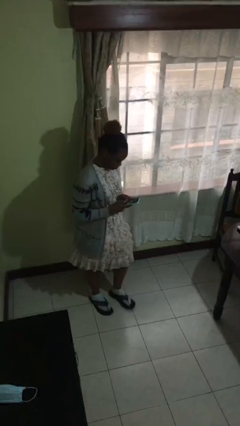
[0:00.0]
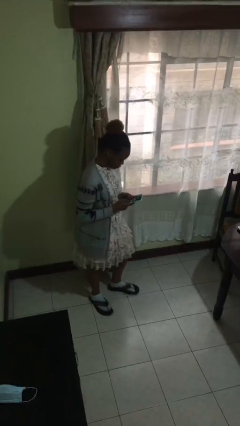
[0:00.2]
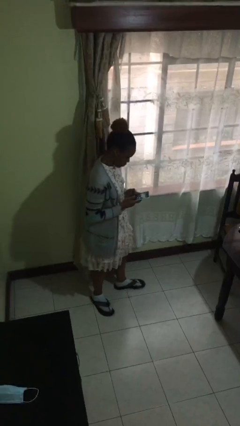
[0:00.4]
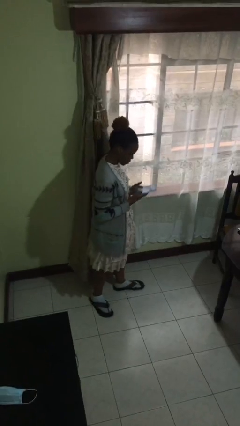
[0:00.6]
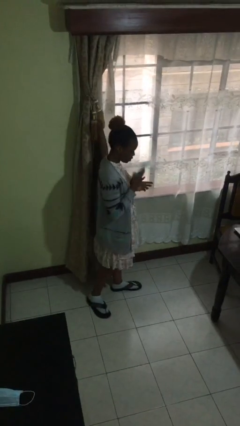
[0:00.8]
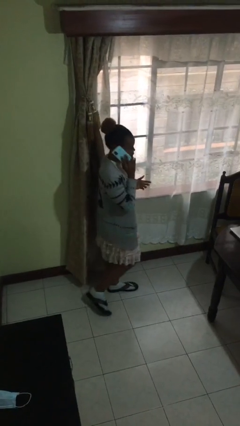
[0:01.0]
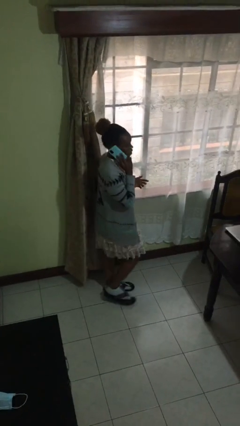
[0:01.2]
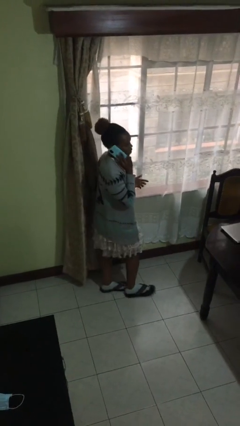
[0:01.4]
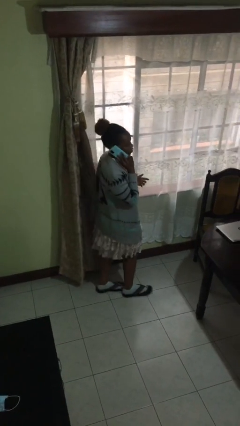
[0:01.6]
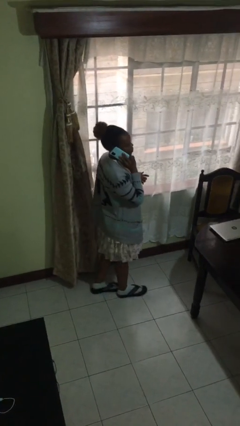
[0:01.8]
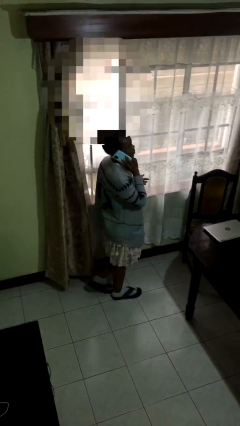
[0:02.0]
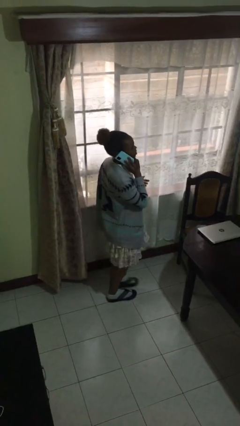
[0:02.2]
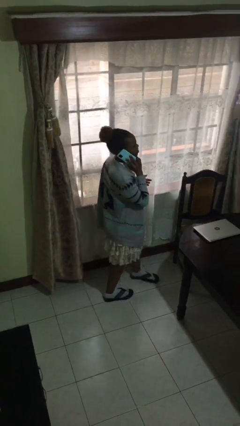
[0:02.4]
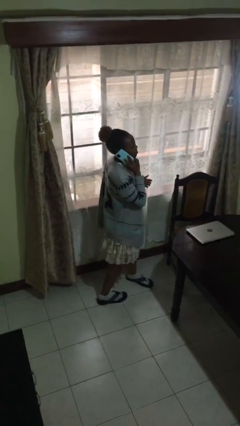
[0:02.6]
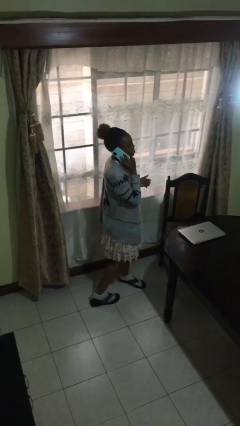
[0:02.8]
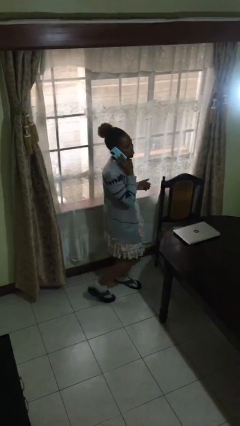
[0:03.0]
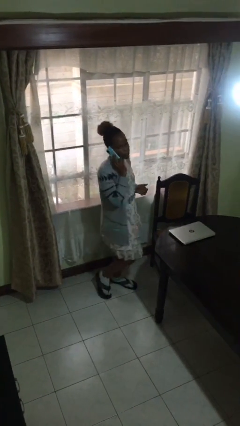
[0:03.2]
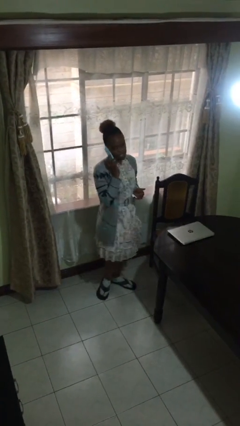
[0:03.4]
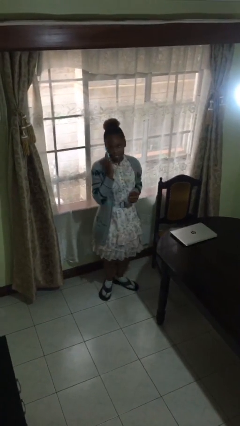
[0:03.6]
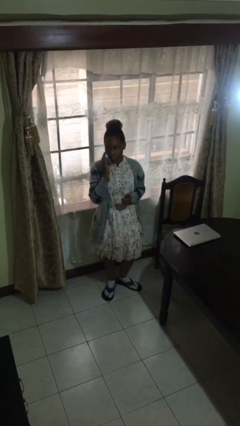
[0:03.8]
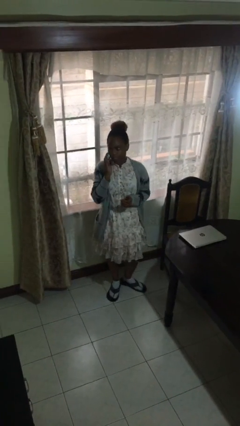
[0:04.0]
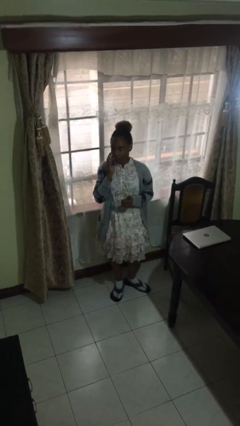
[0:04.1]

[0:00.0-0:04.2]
person talks on phone

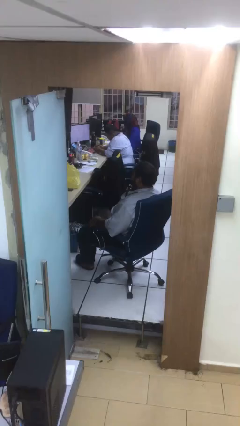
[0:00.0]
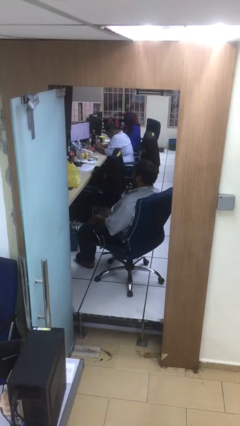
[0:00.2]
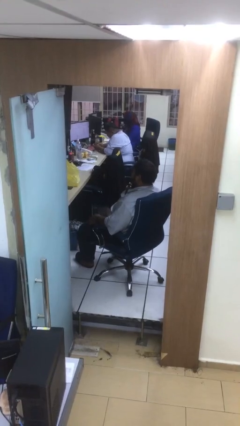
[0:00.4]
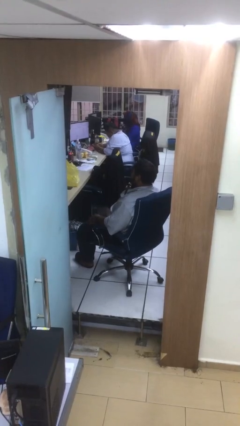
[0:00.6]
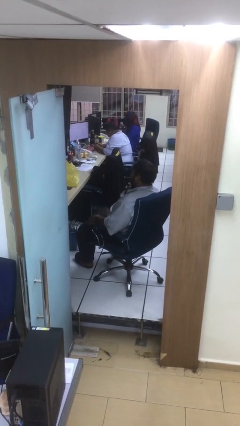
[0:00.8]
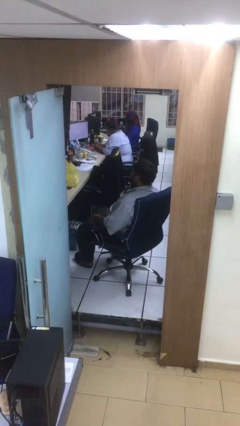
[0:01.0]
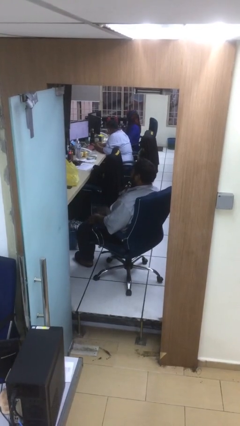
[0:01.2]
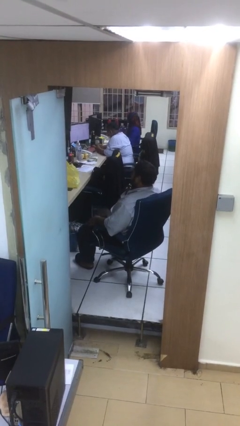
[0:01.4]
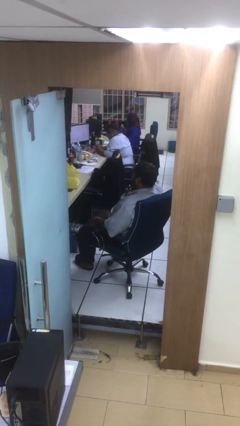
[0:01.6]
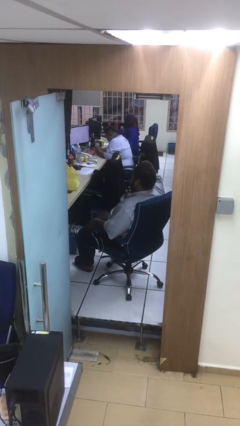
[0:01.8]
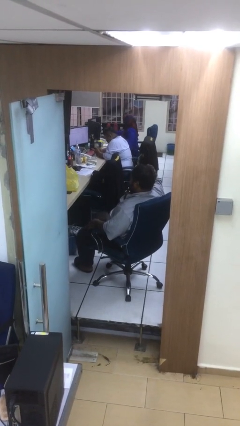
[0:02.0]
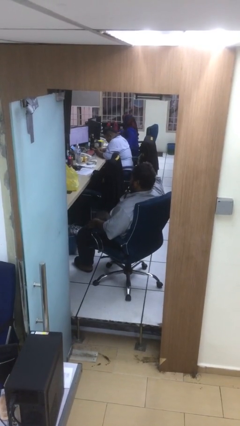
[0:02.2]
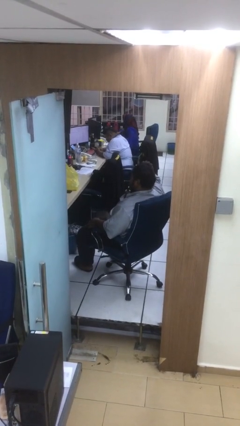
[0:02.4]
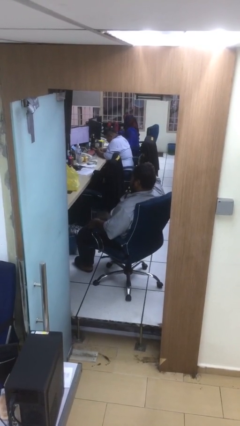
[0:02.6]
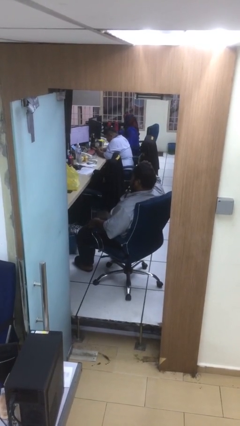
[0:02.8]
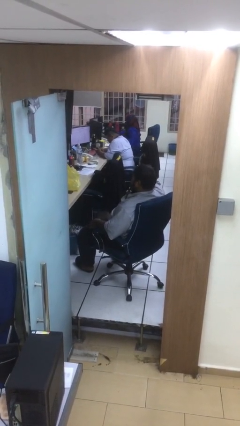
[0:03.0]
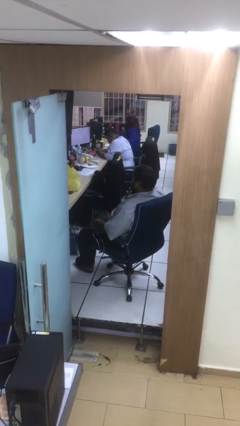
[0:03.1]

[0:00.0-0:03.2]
person scratches face

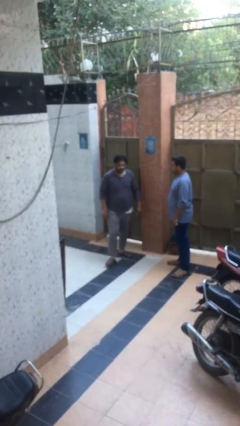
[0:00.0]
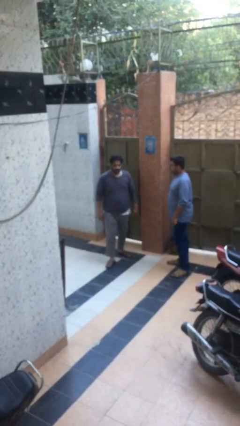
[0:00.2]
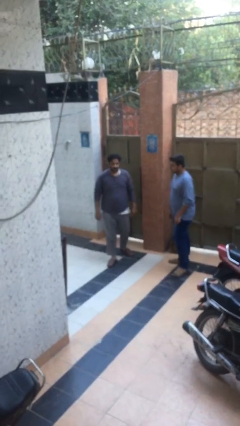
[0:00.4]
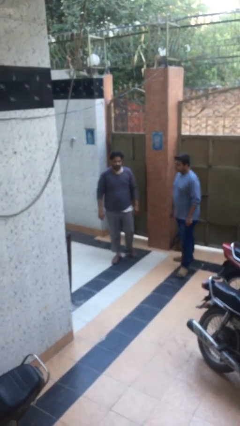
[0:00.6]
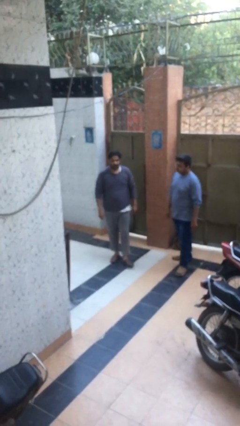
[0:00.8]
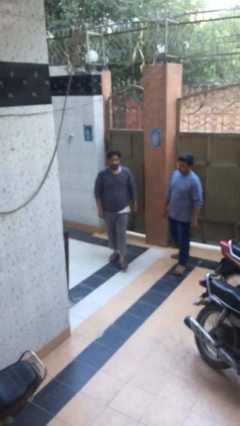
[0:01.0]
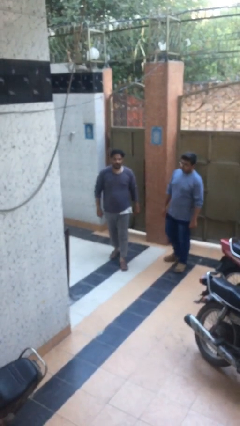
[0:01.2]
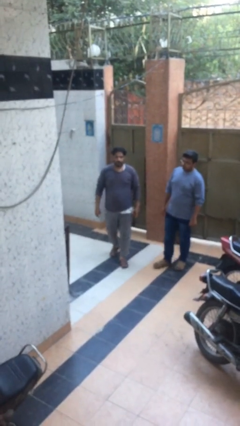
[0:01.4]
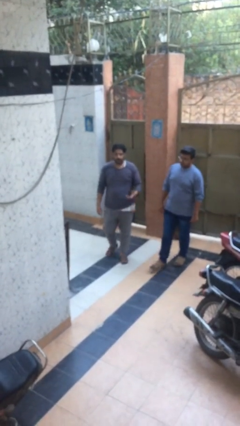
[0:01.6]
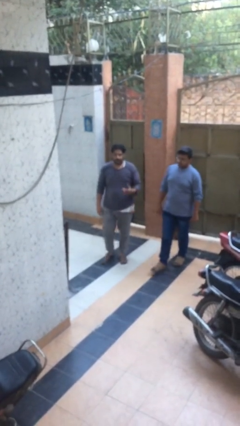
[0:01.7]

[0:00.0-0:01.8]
person talks to person

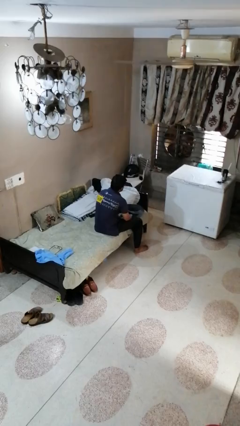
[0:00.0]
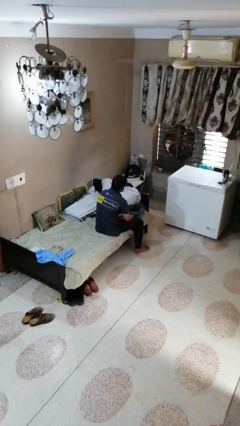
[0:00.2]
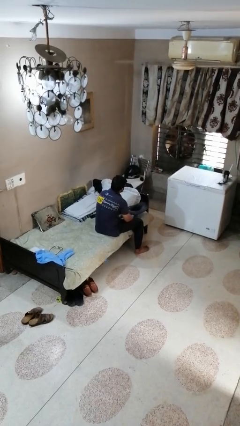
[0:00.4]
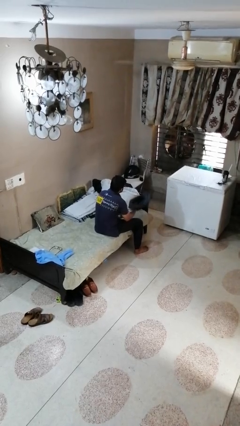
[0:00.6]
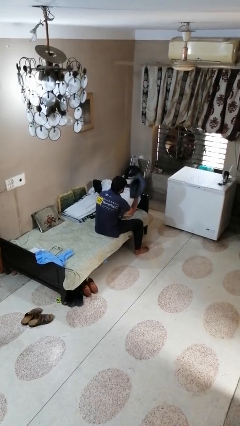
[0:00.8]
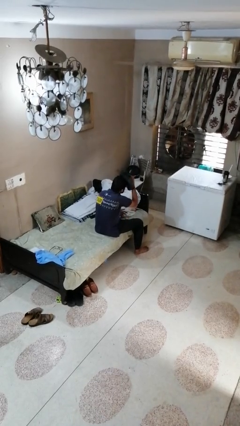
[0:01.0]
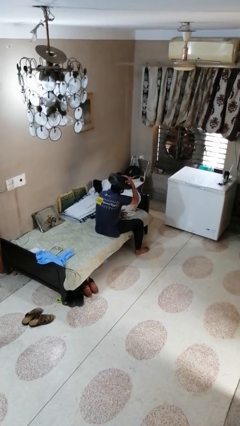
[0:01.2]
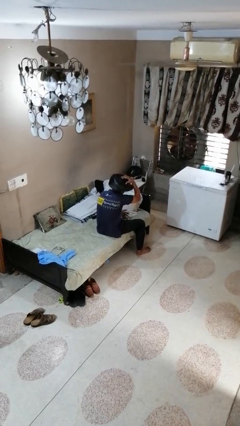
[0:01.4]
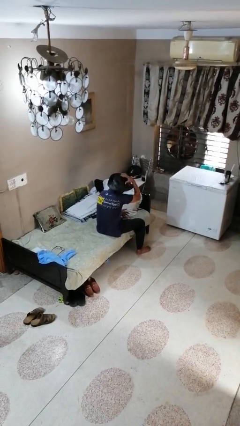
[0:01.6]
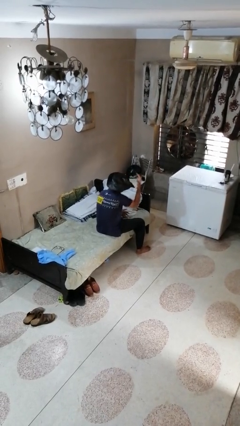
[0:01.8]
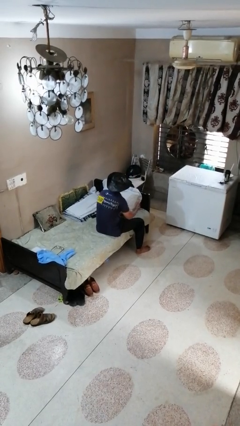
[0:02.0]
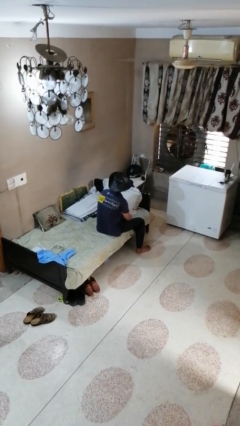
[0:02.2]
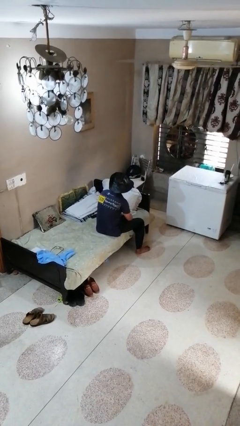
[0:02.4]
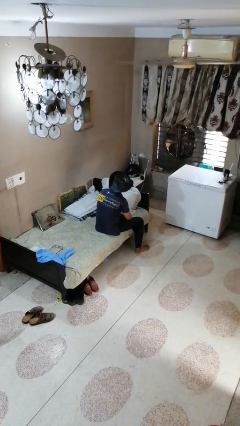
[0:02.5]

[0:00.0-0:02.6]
person puts on hat

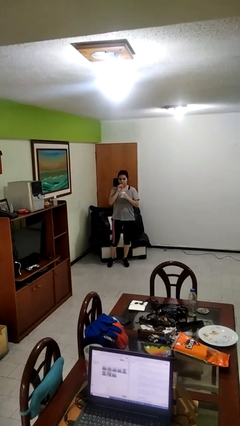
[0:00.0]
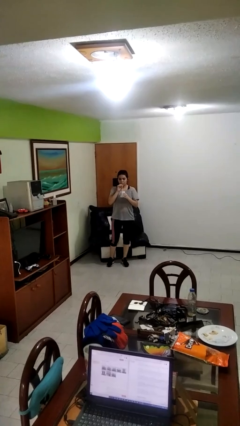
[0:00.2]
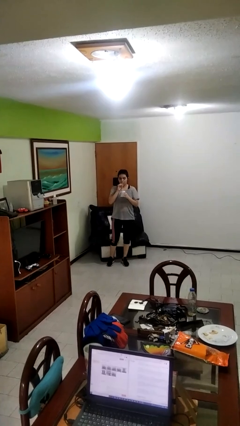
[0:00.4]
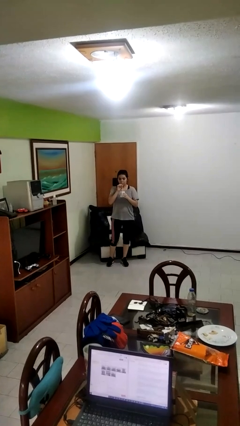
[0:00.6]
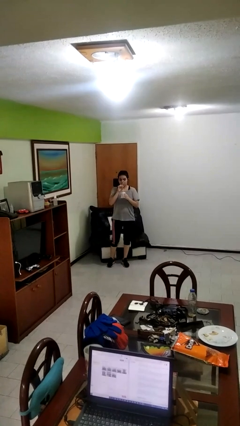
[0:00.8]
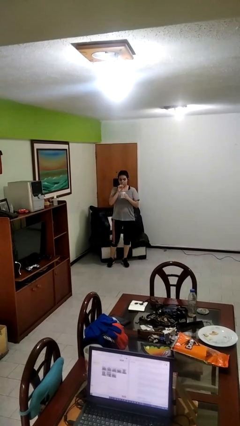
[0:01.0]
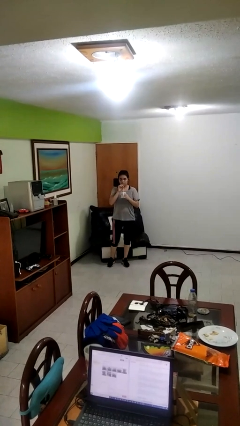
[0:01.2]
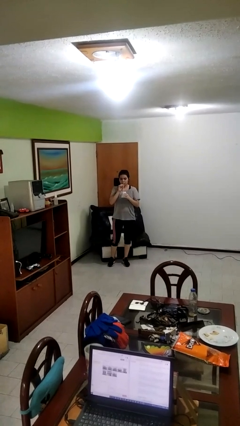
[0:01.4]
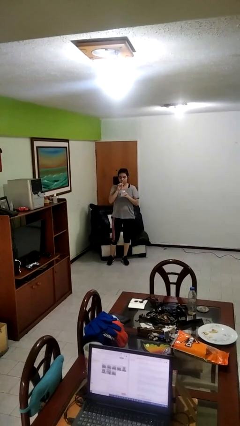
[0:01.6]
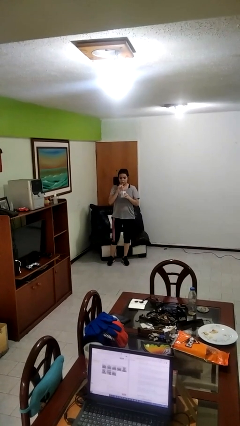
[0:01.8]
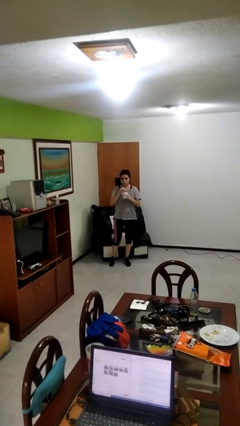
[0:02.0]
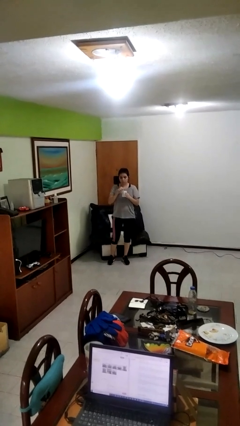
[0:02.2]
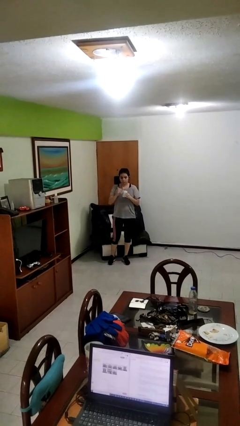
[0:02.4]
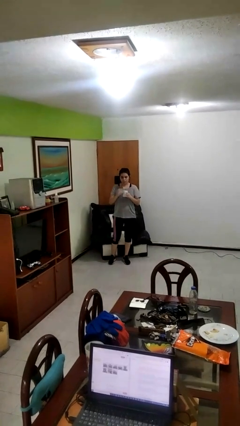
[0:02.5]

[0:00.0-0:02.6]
person drinks from straw

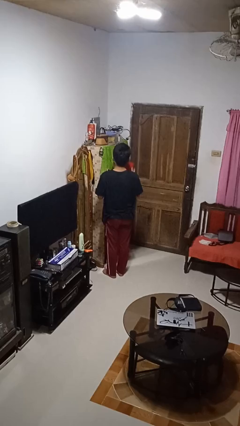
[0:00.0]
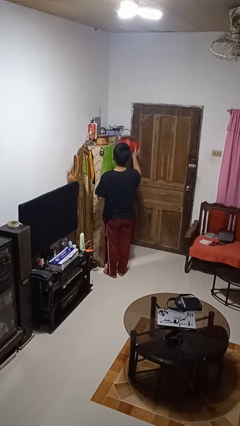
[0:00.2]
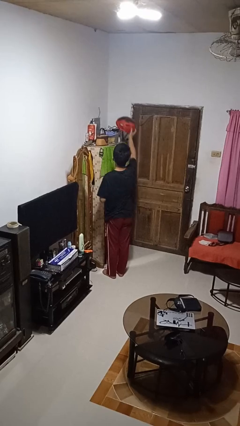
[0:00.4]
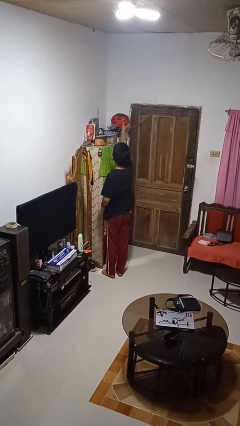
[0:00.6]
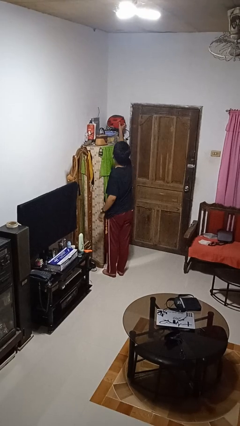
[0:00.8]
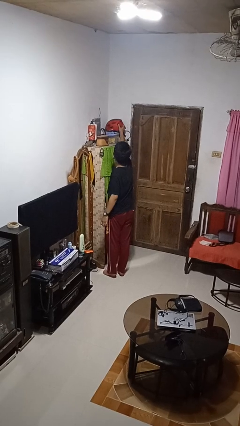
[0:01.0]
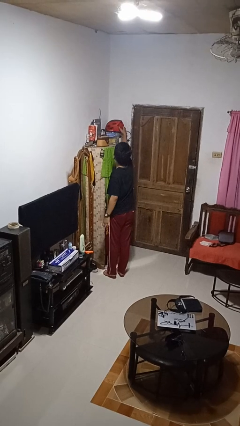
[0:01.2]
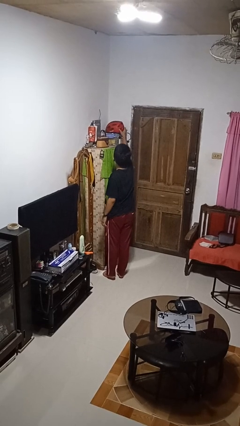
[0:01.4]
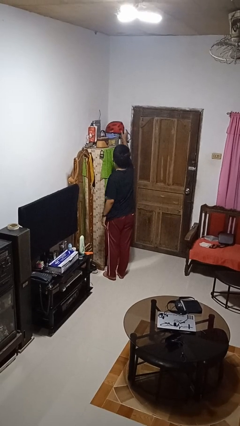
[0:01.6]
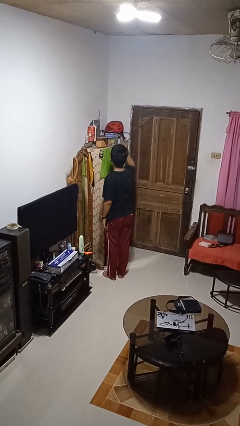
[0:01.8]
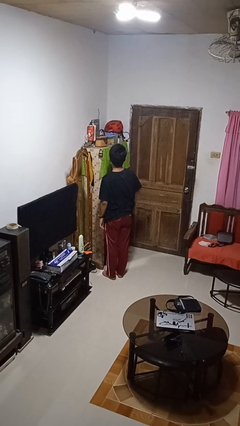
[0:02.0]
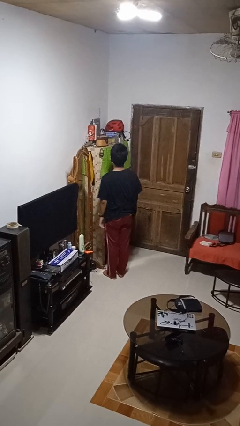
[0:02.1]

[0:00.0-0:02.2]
person puts down object on shelf

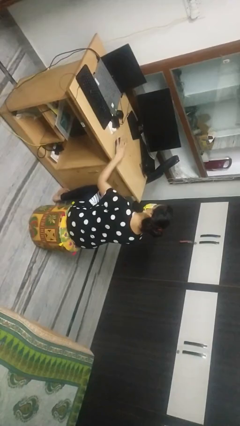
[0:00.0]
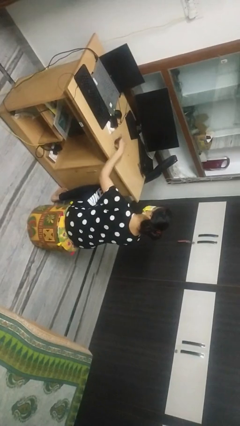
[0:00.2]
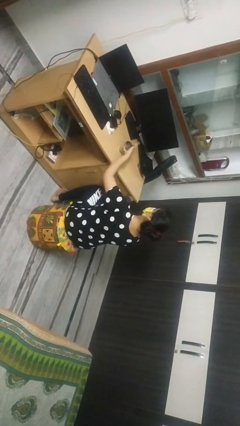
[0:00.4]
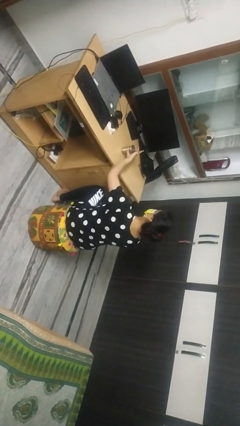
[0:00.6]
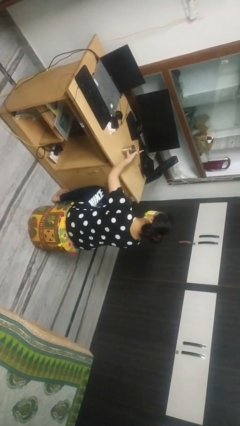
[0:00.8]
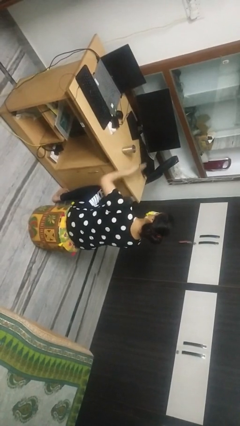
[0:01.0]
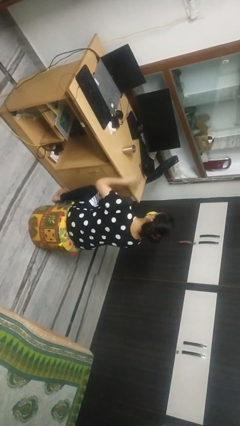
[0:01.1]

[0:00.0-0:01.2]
person sets upright glass
